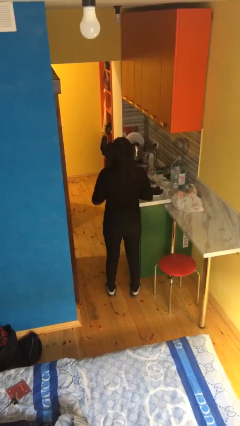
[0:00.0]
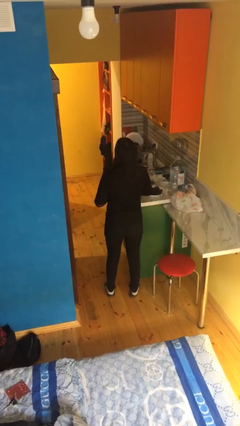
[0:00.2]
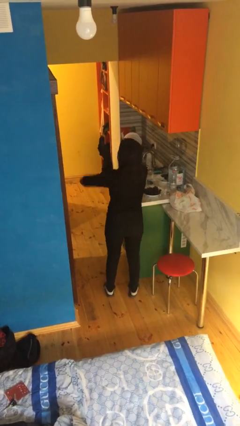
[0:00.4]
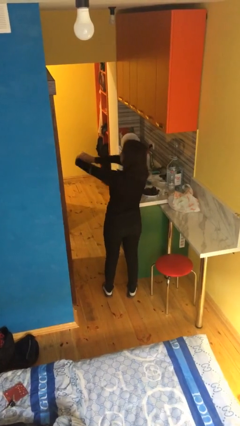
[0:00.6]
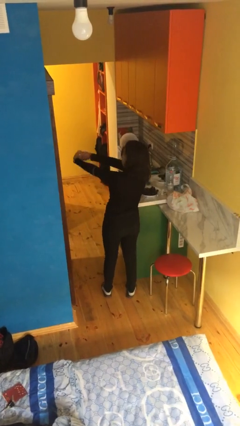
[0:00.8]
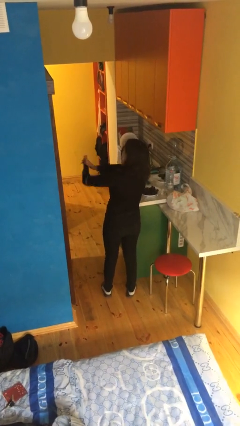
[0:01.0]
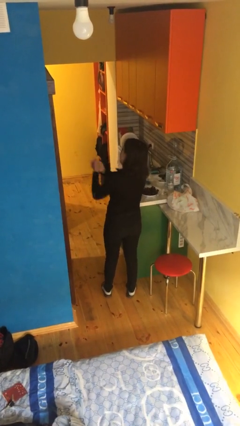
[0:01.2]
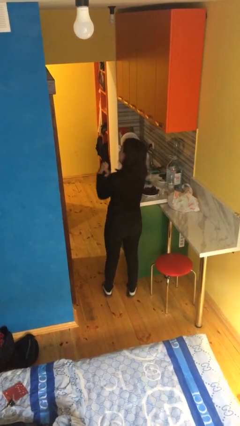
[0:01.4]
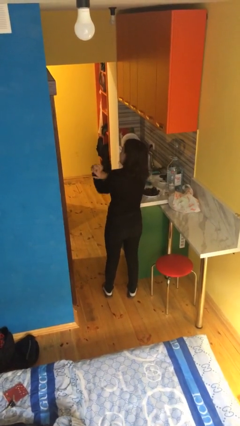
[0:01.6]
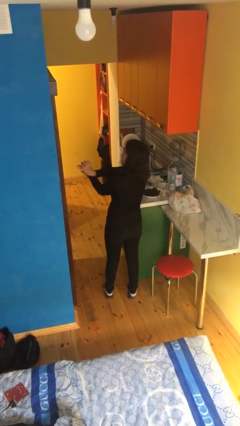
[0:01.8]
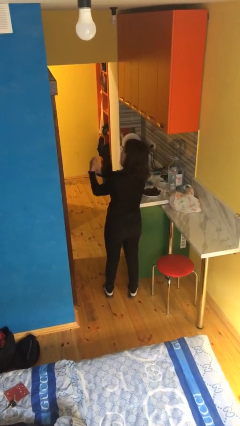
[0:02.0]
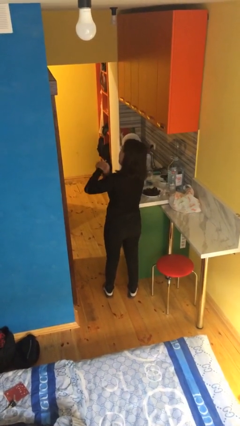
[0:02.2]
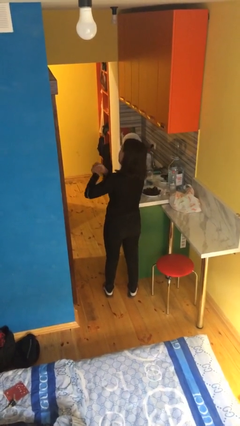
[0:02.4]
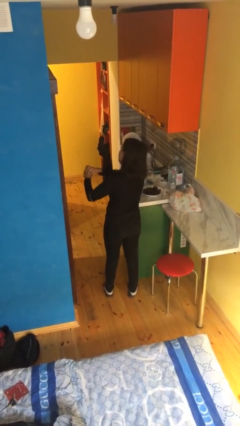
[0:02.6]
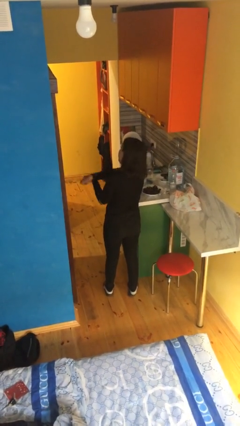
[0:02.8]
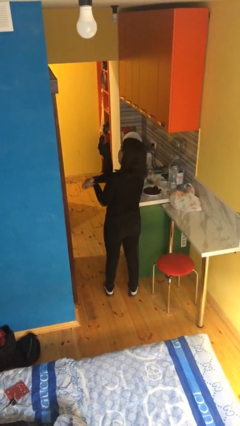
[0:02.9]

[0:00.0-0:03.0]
person cracks knuckles

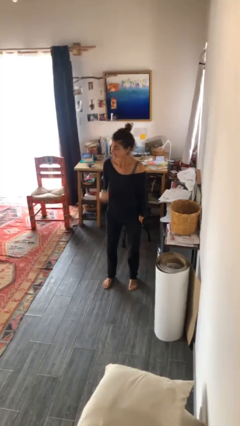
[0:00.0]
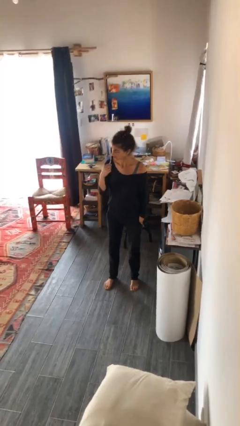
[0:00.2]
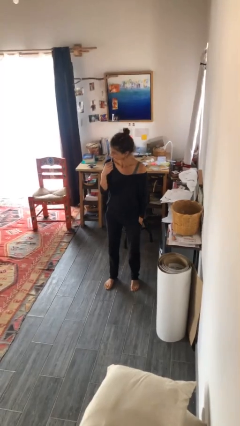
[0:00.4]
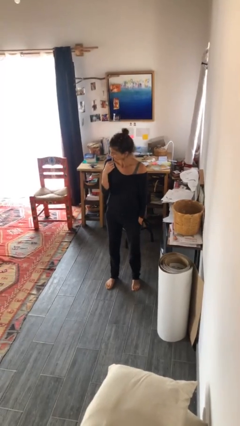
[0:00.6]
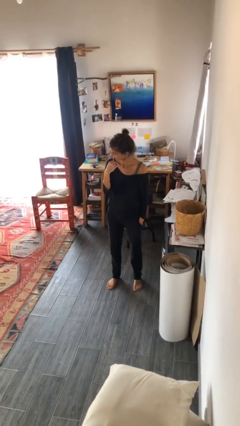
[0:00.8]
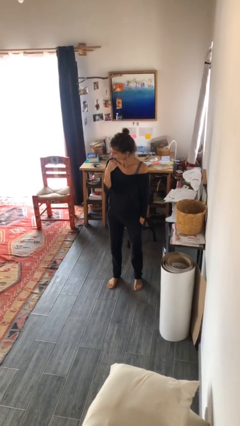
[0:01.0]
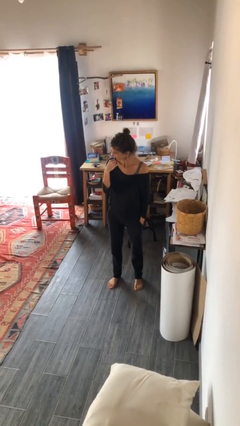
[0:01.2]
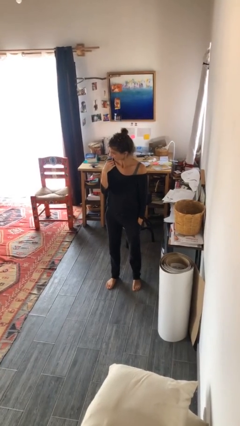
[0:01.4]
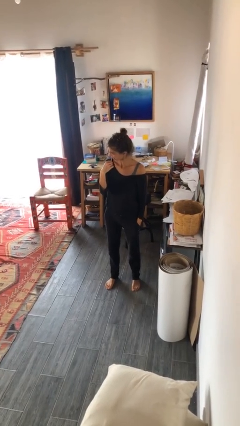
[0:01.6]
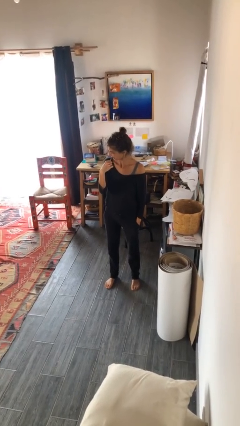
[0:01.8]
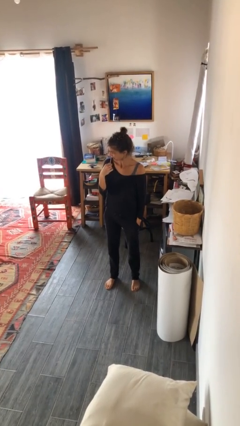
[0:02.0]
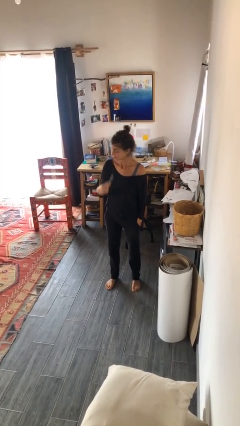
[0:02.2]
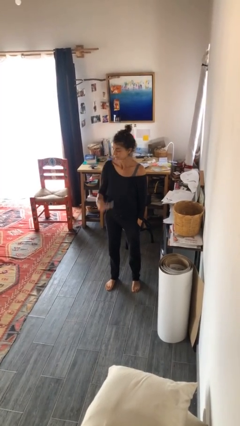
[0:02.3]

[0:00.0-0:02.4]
person brushes teeth

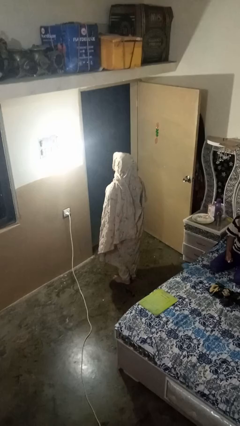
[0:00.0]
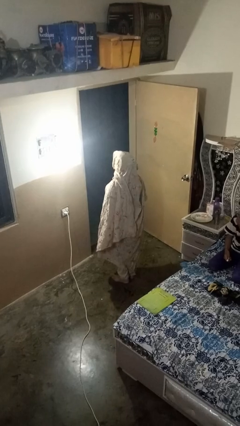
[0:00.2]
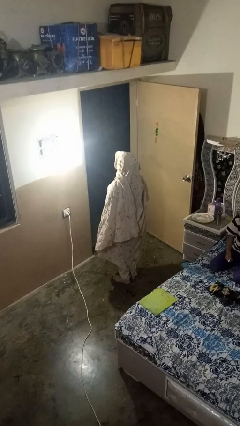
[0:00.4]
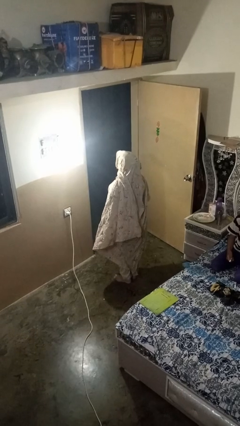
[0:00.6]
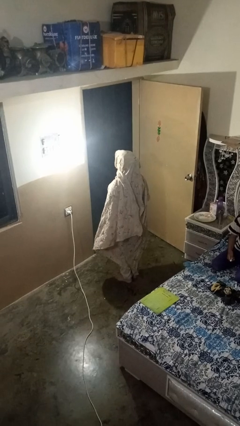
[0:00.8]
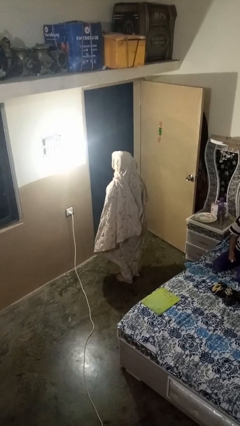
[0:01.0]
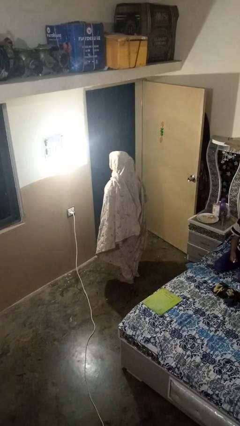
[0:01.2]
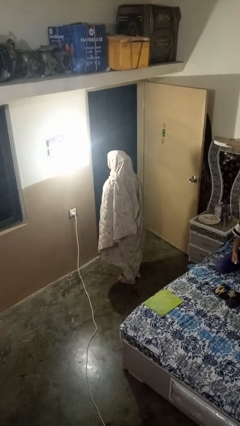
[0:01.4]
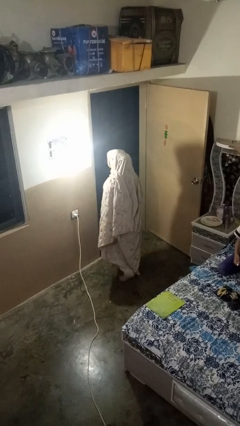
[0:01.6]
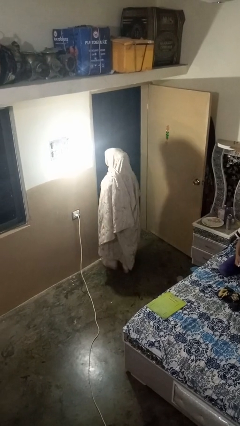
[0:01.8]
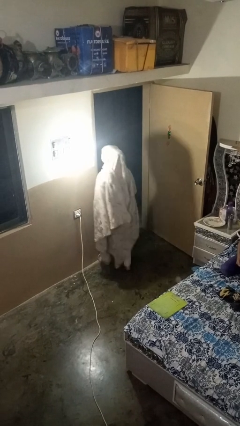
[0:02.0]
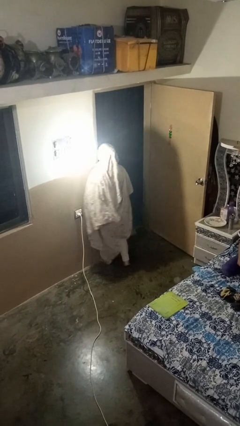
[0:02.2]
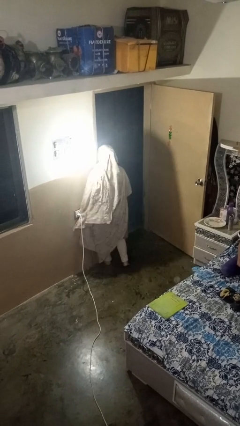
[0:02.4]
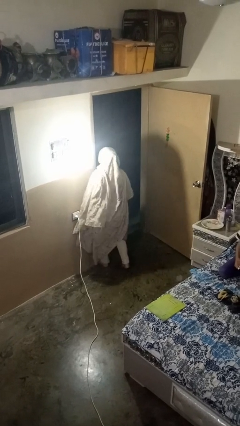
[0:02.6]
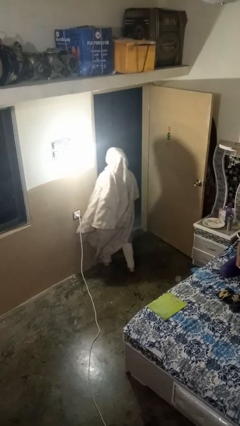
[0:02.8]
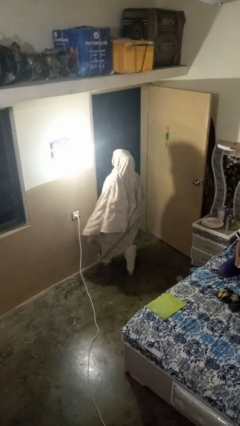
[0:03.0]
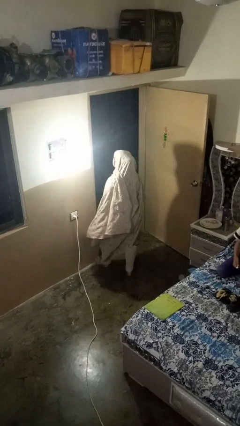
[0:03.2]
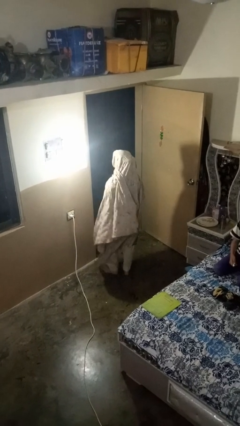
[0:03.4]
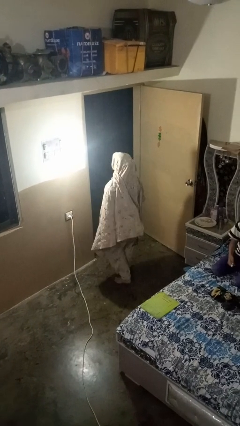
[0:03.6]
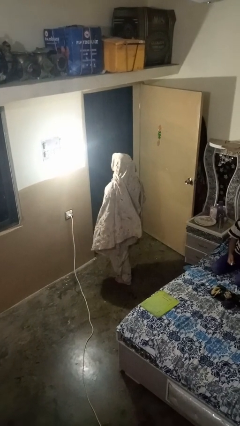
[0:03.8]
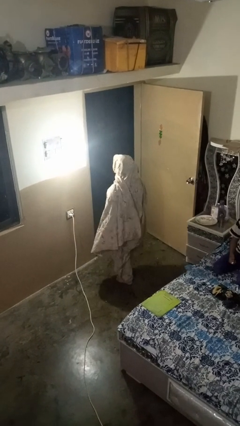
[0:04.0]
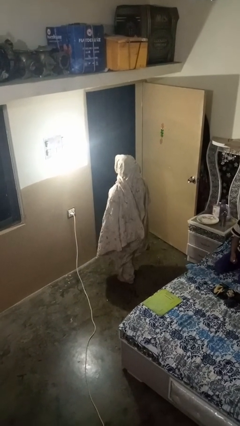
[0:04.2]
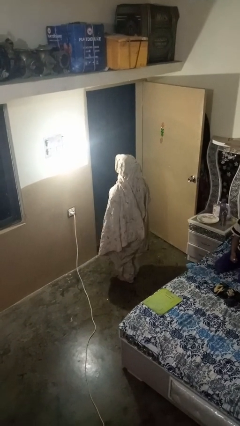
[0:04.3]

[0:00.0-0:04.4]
person bumps into wall
